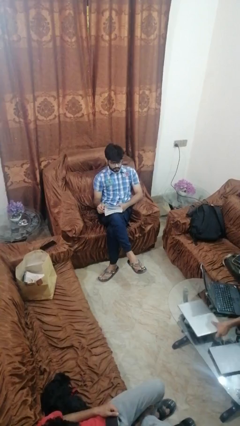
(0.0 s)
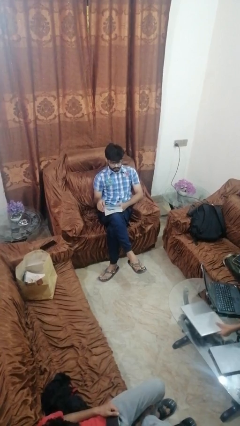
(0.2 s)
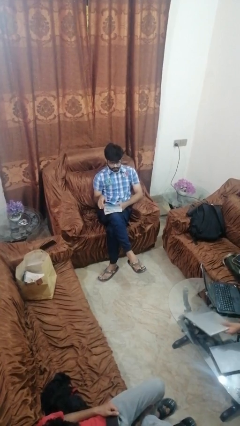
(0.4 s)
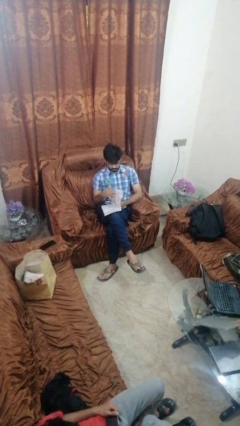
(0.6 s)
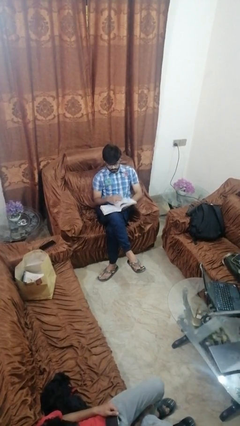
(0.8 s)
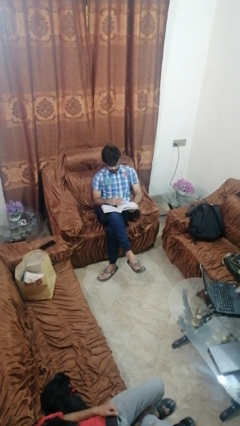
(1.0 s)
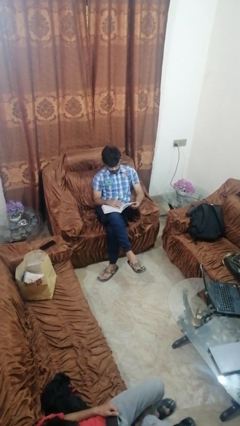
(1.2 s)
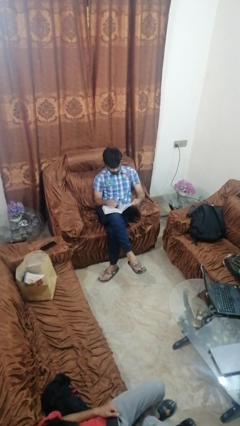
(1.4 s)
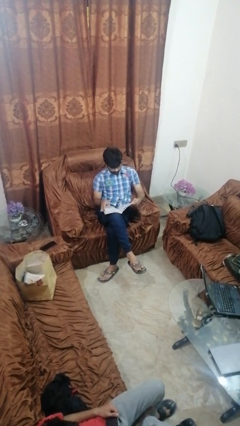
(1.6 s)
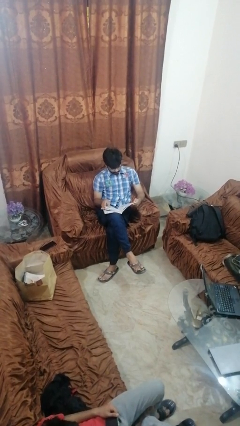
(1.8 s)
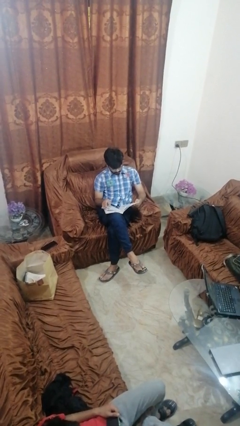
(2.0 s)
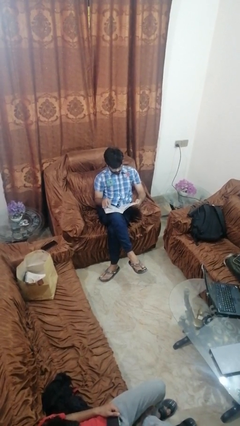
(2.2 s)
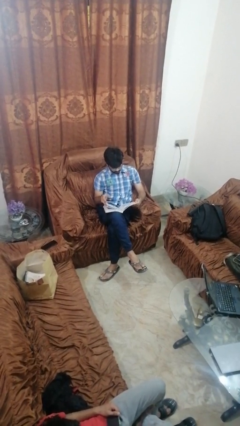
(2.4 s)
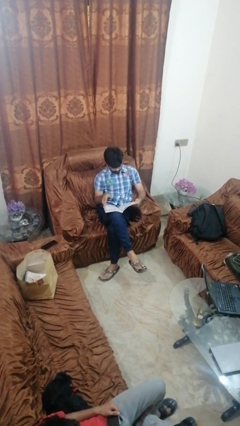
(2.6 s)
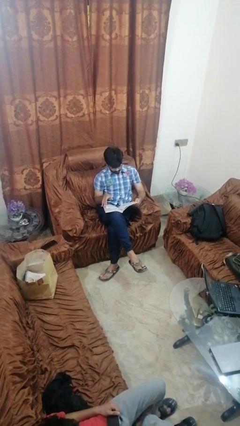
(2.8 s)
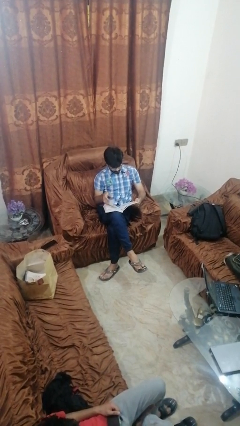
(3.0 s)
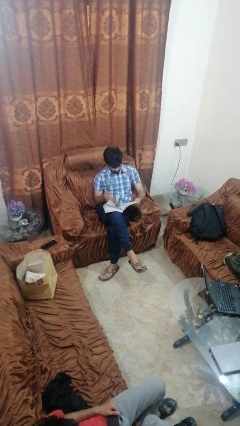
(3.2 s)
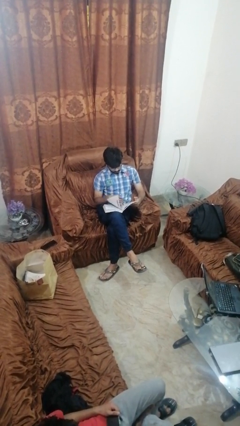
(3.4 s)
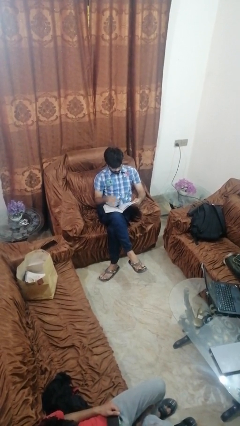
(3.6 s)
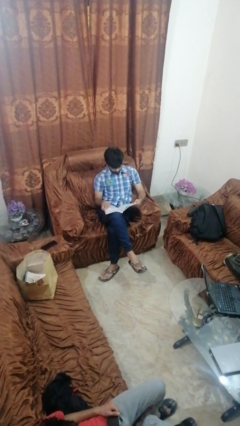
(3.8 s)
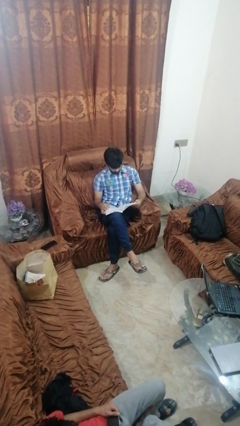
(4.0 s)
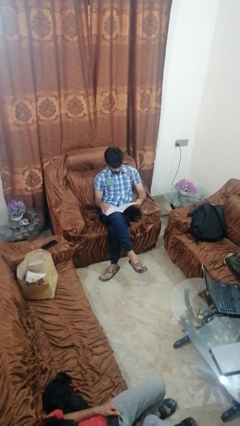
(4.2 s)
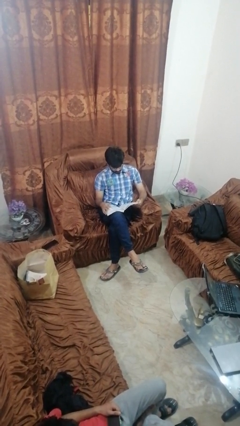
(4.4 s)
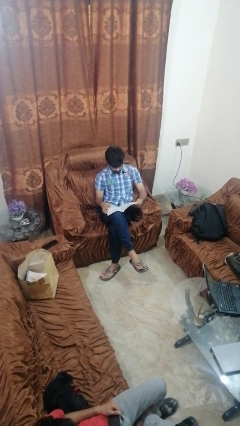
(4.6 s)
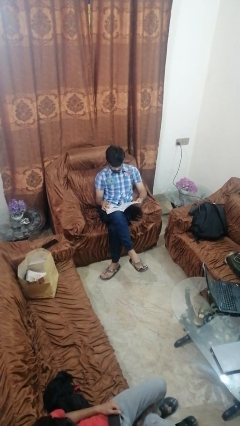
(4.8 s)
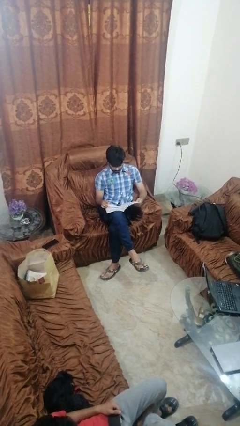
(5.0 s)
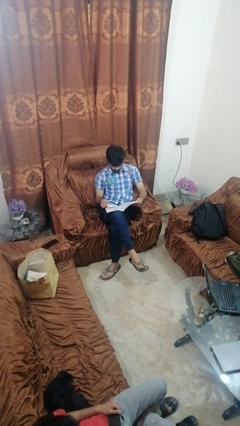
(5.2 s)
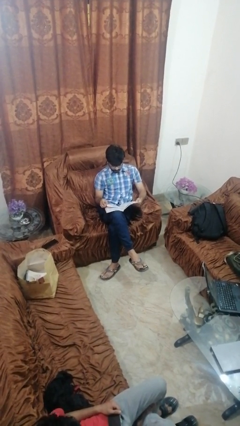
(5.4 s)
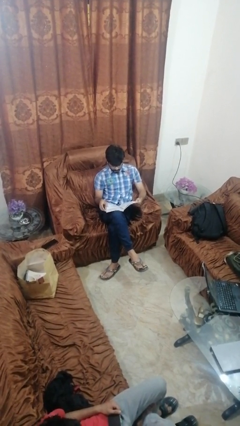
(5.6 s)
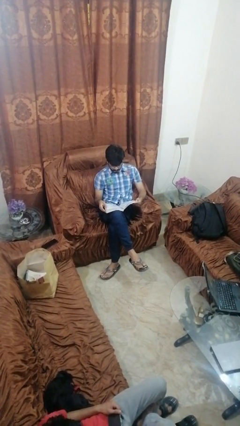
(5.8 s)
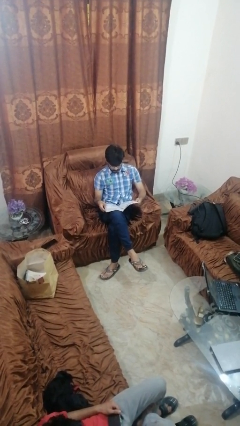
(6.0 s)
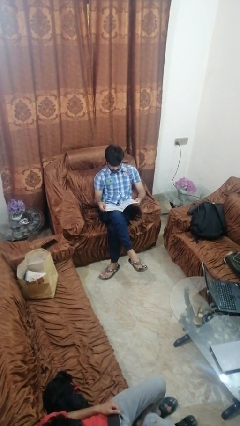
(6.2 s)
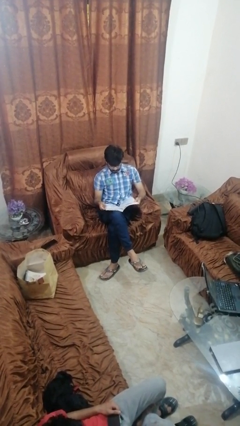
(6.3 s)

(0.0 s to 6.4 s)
person reads book

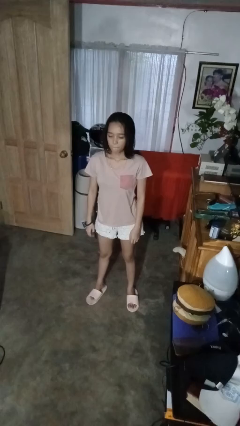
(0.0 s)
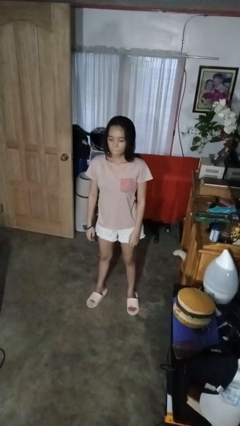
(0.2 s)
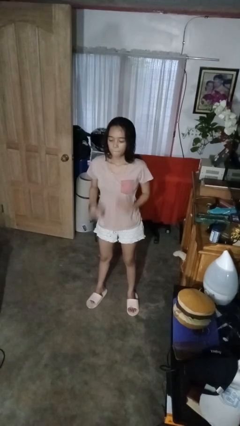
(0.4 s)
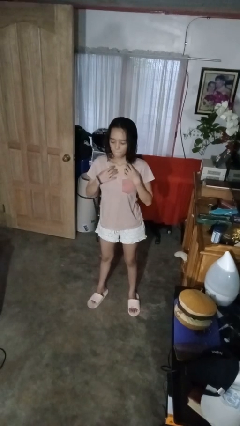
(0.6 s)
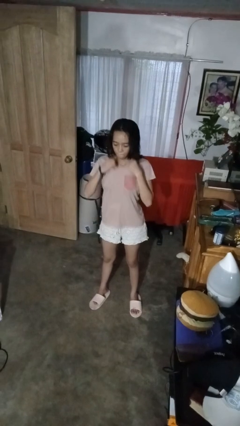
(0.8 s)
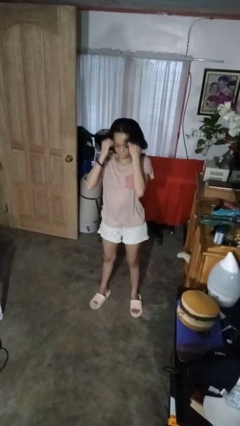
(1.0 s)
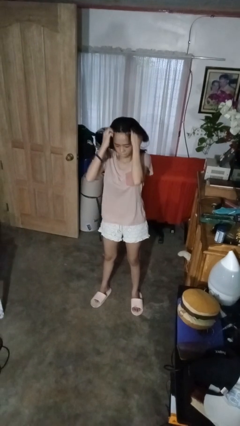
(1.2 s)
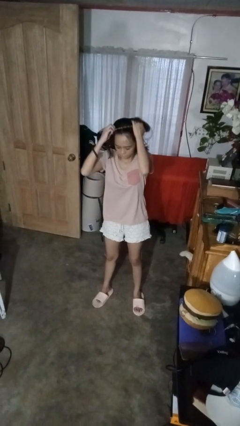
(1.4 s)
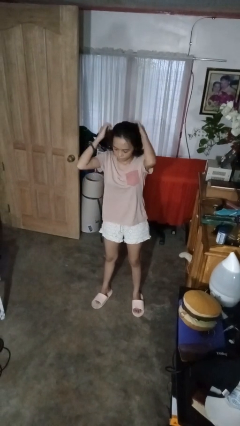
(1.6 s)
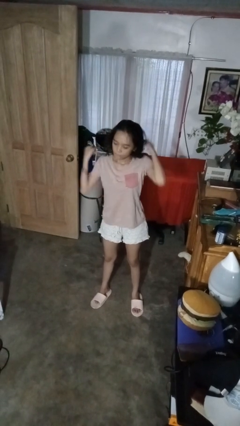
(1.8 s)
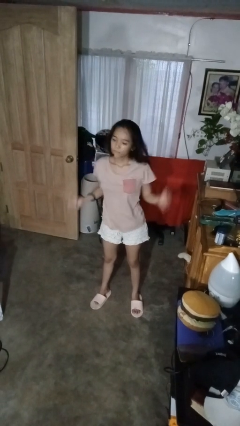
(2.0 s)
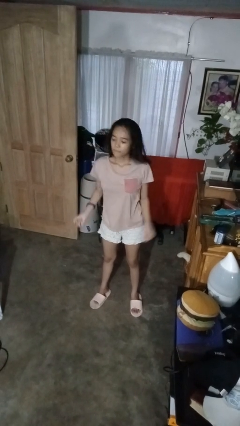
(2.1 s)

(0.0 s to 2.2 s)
person takes off necklace

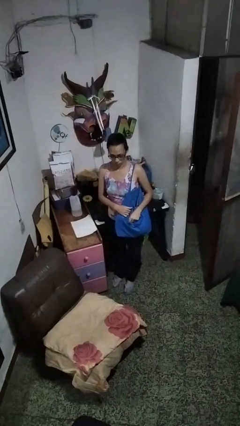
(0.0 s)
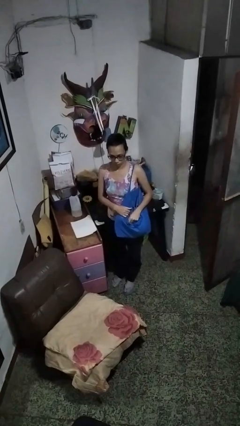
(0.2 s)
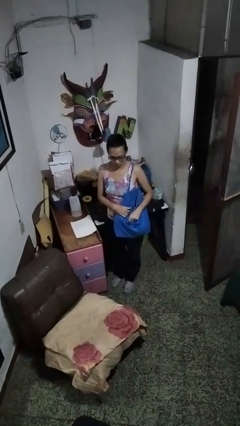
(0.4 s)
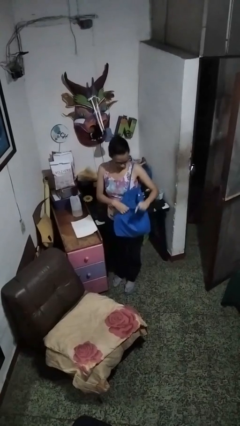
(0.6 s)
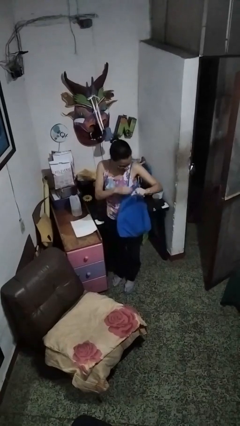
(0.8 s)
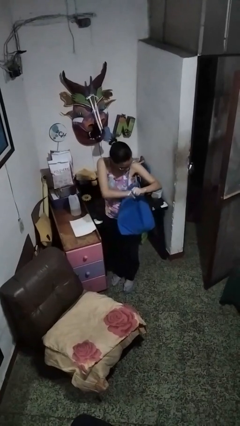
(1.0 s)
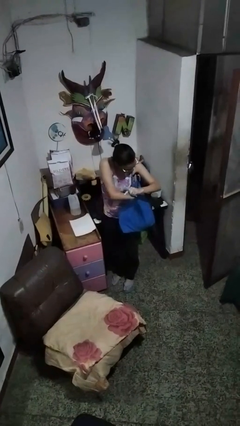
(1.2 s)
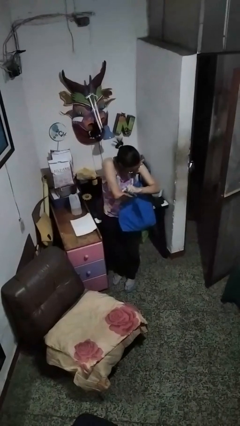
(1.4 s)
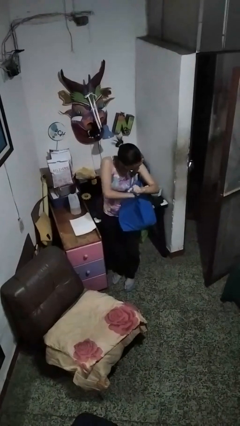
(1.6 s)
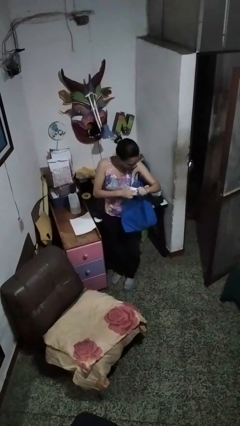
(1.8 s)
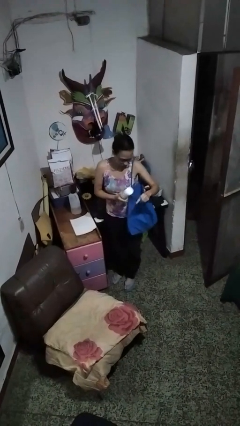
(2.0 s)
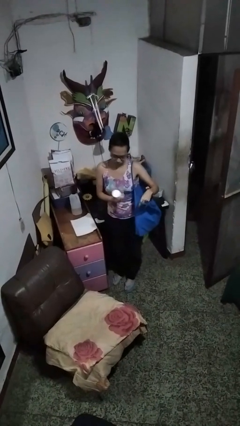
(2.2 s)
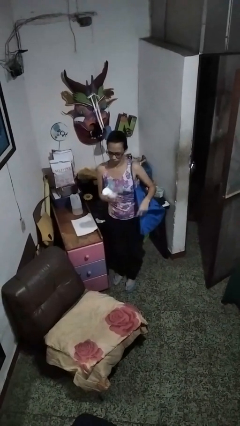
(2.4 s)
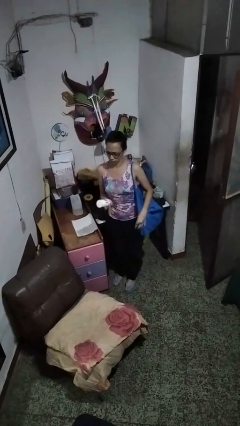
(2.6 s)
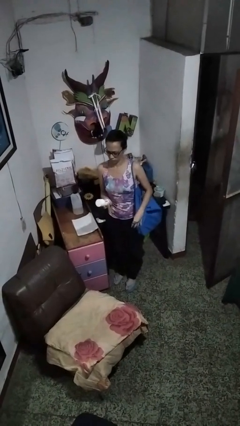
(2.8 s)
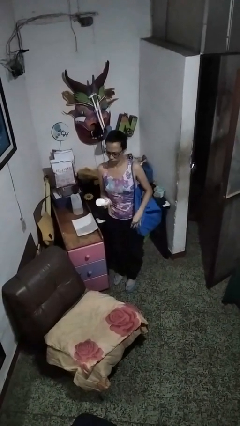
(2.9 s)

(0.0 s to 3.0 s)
person takes object from bag

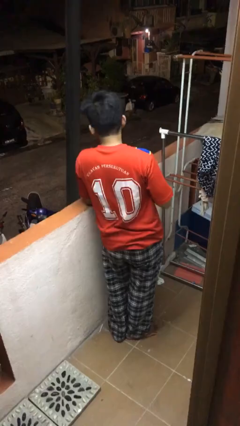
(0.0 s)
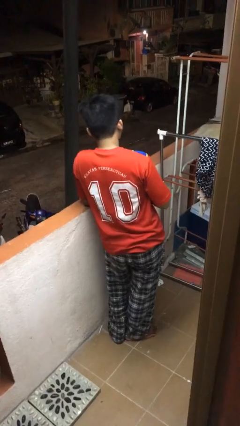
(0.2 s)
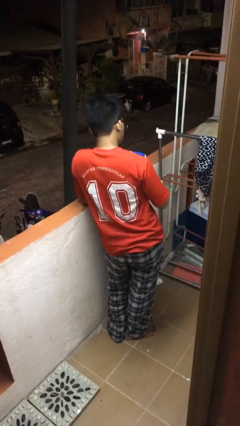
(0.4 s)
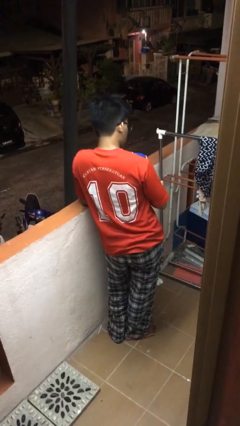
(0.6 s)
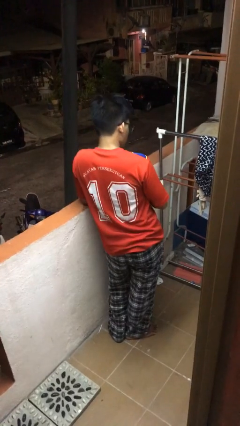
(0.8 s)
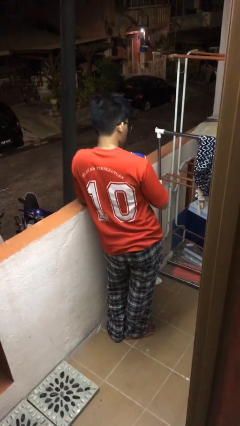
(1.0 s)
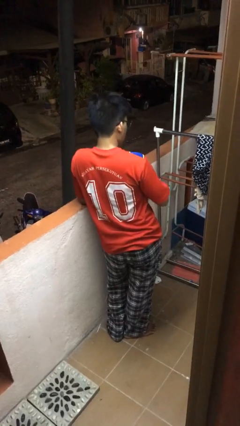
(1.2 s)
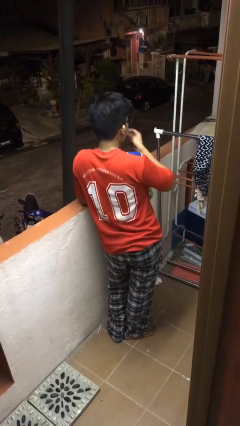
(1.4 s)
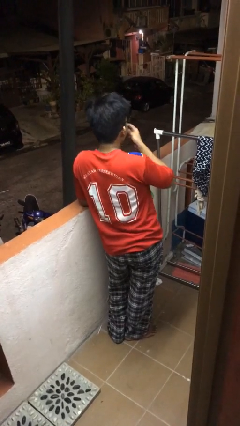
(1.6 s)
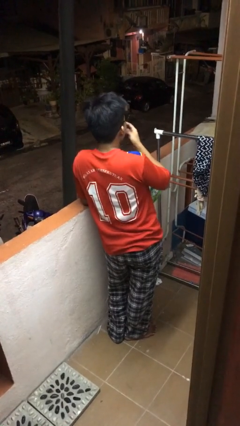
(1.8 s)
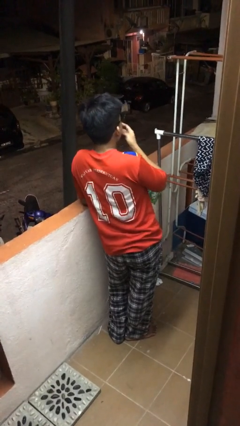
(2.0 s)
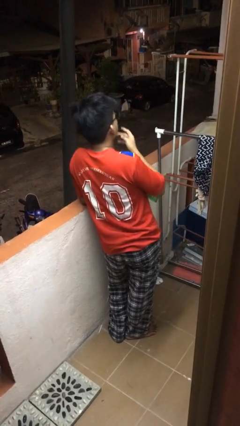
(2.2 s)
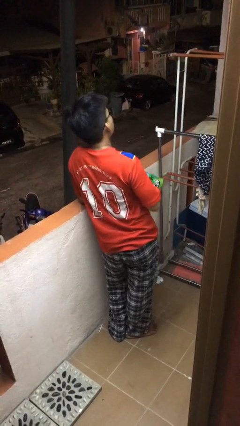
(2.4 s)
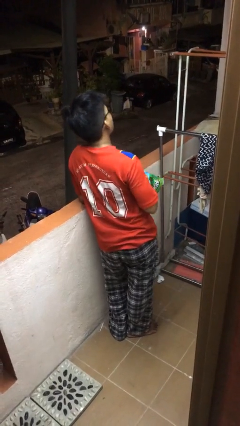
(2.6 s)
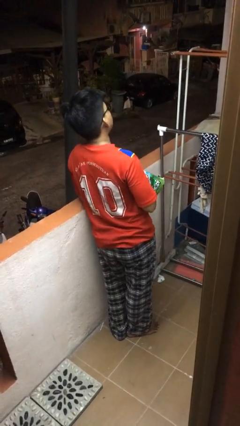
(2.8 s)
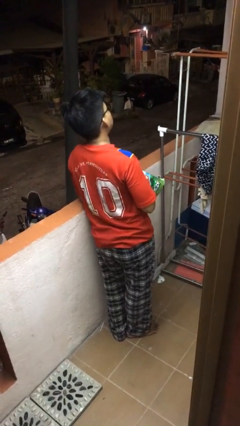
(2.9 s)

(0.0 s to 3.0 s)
person eats snack from bag

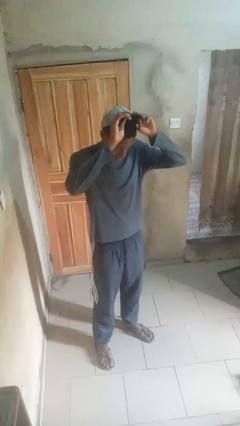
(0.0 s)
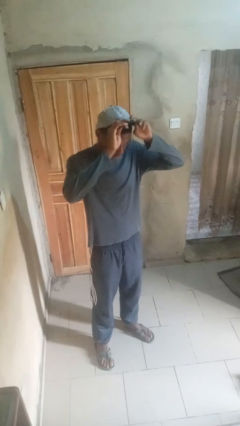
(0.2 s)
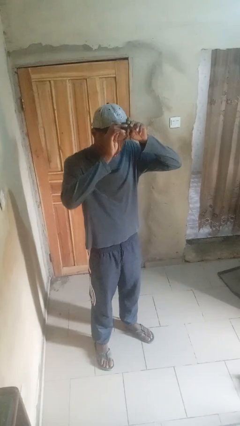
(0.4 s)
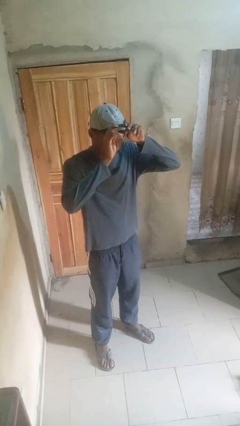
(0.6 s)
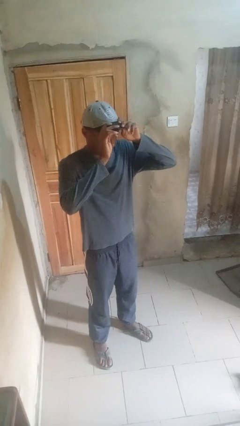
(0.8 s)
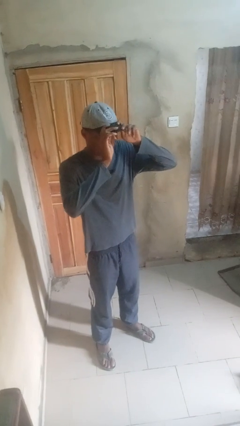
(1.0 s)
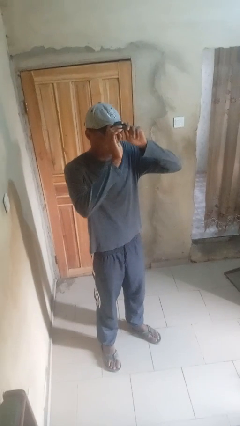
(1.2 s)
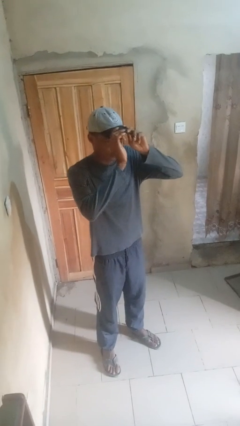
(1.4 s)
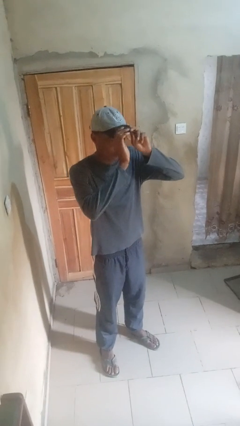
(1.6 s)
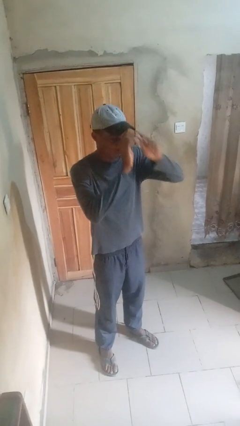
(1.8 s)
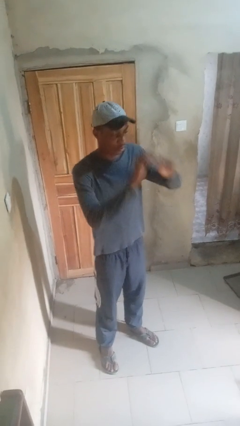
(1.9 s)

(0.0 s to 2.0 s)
person puts on hat

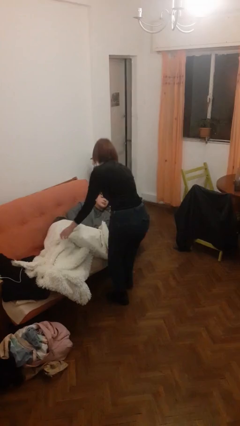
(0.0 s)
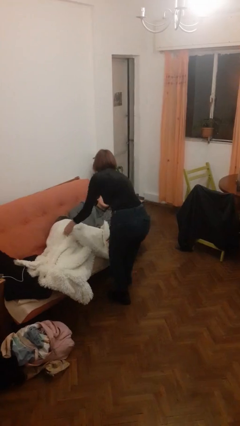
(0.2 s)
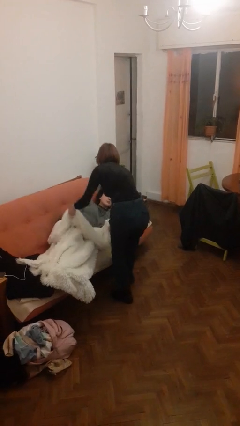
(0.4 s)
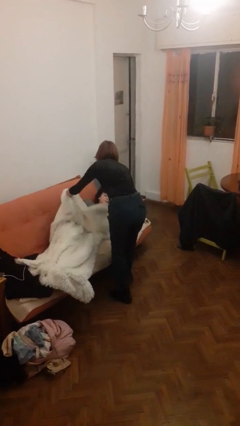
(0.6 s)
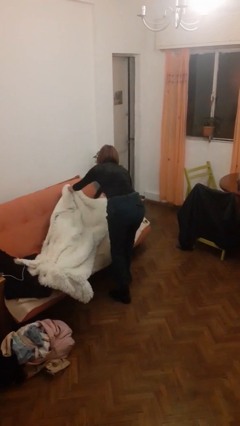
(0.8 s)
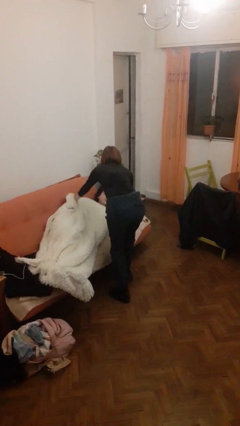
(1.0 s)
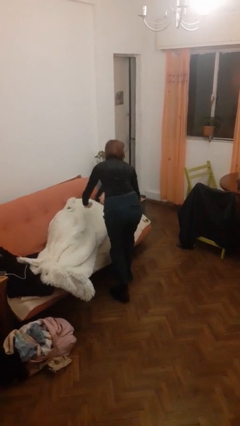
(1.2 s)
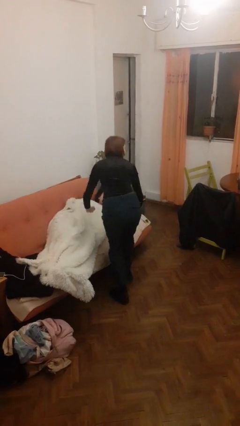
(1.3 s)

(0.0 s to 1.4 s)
person covers friend with blanket
